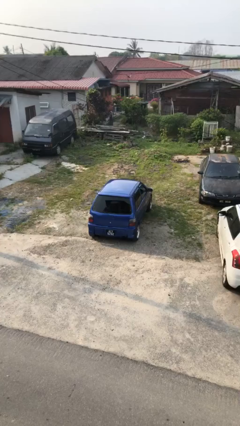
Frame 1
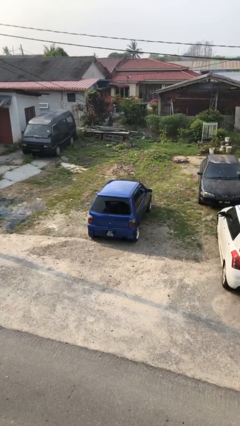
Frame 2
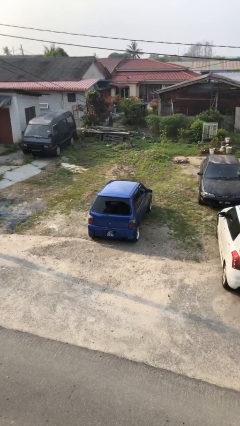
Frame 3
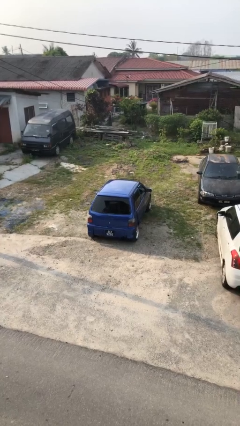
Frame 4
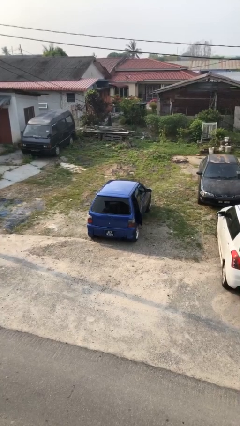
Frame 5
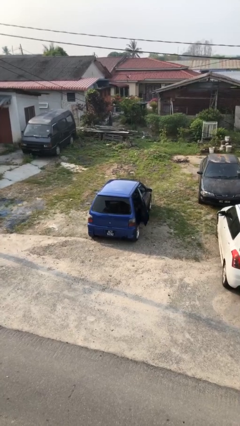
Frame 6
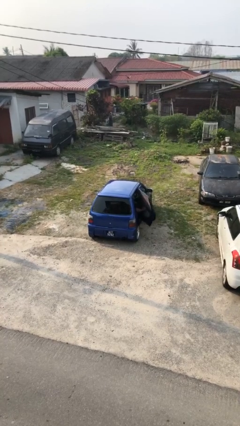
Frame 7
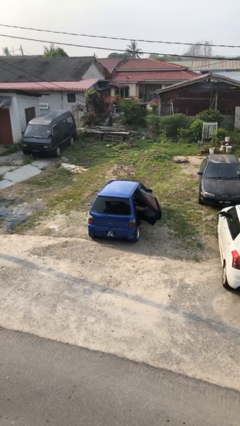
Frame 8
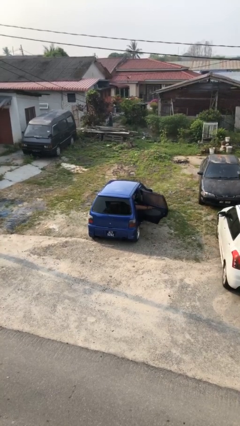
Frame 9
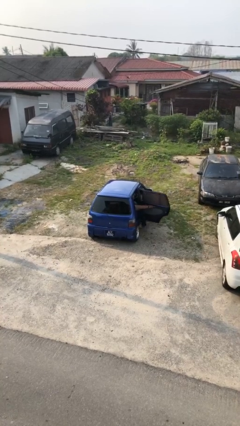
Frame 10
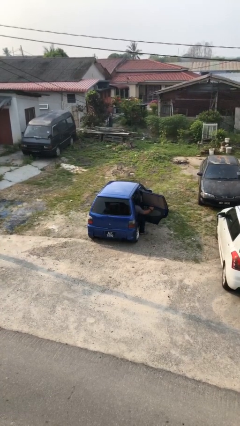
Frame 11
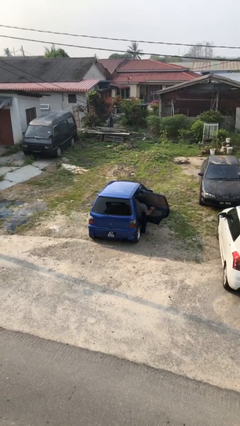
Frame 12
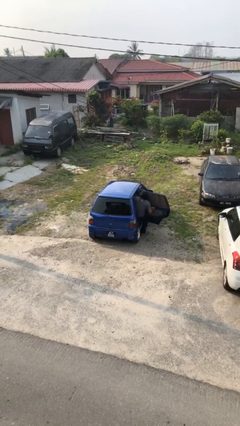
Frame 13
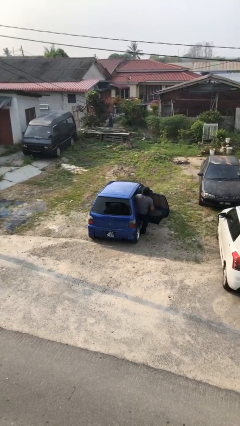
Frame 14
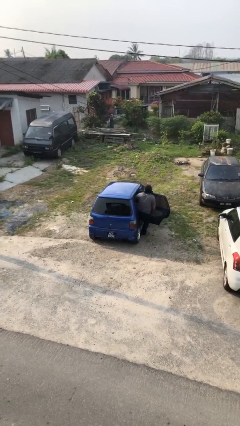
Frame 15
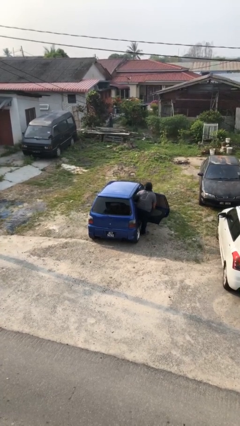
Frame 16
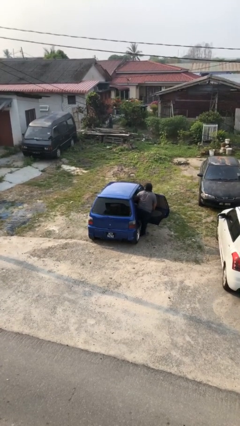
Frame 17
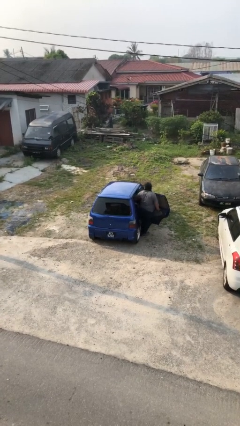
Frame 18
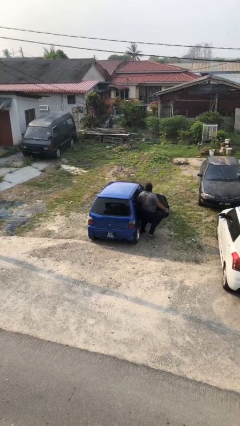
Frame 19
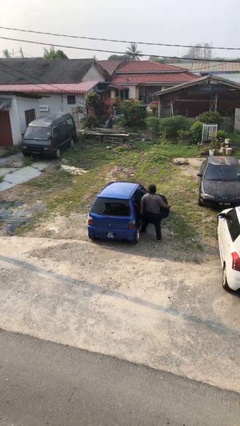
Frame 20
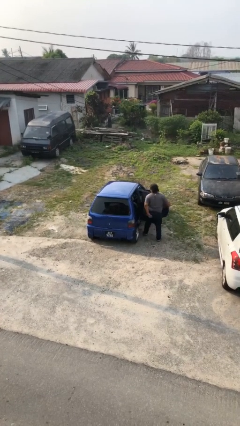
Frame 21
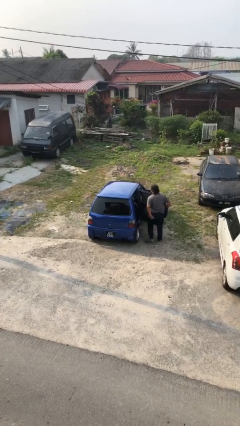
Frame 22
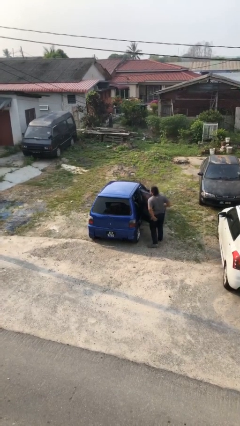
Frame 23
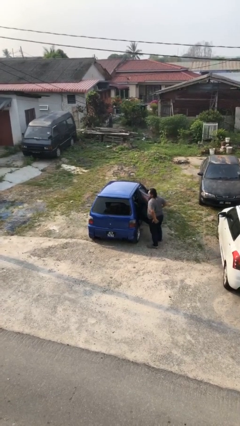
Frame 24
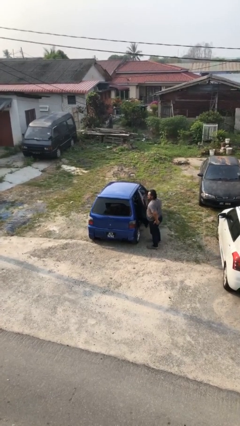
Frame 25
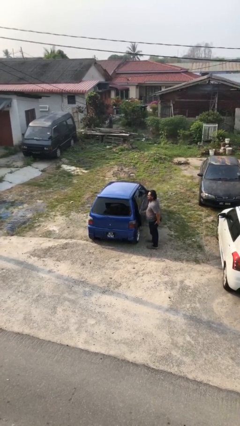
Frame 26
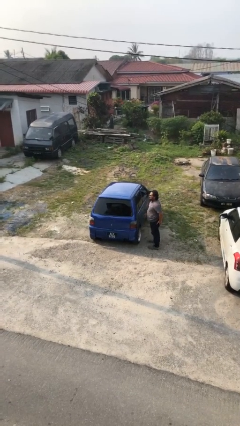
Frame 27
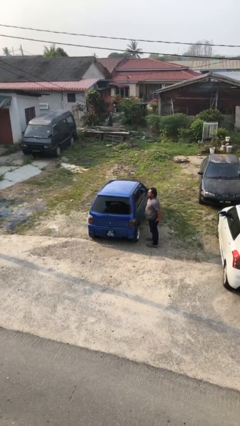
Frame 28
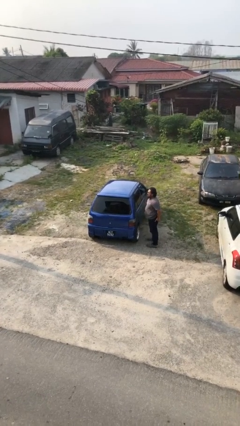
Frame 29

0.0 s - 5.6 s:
car drops off person

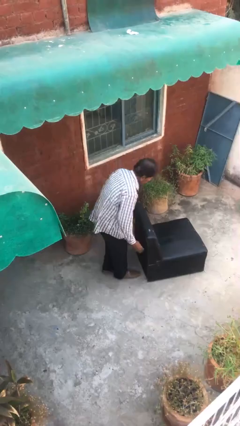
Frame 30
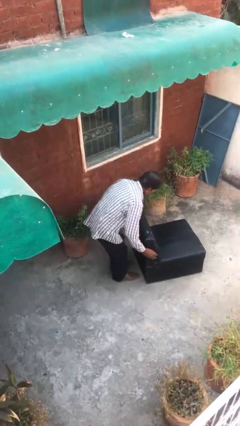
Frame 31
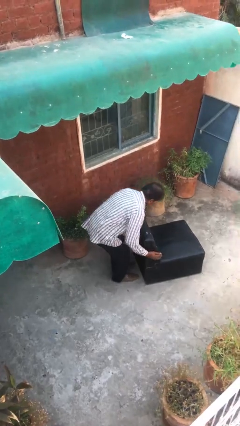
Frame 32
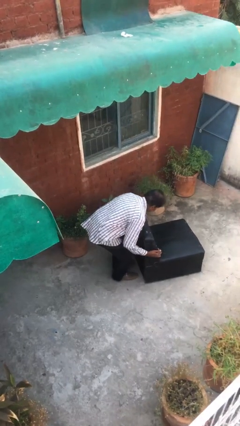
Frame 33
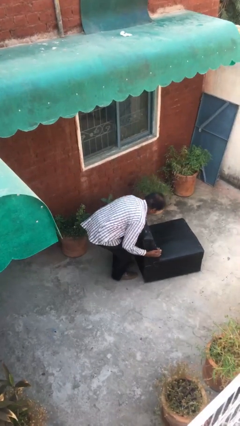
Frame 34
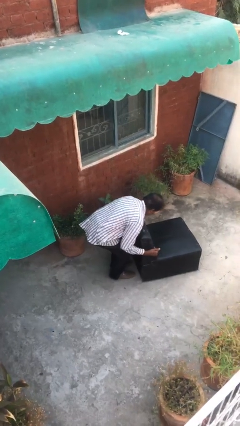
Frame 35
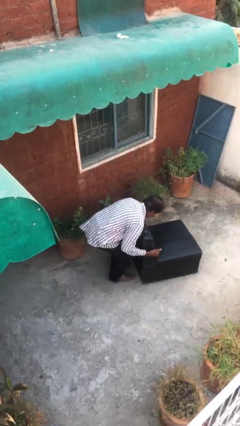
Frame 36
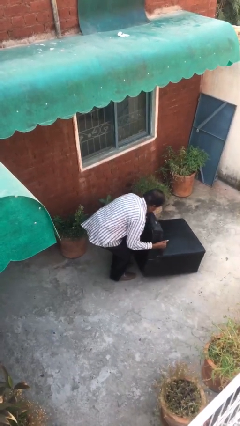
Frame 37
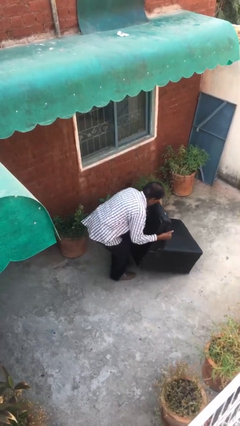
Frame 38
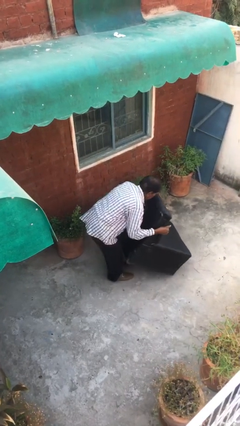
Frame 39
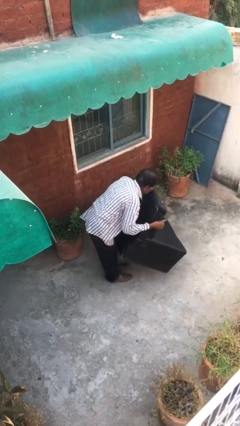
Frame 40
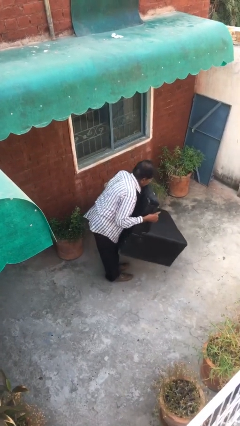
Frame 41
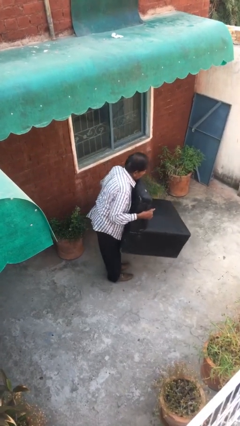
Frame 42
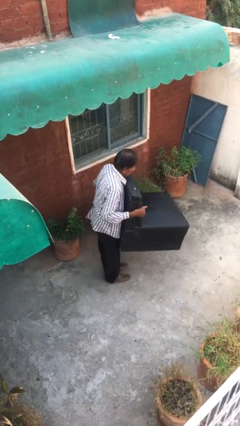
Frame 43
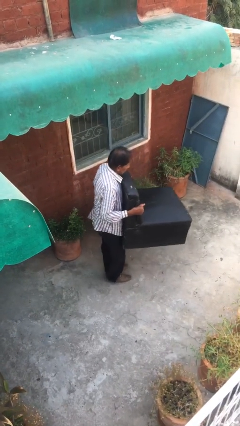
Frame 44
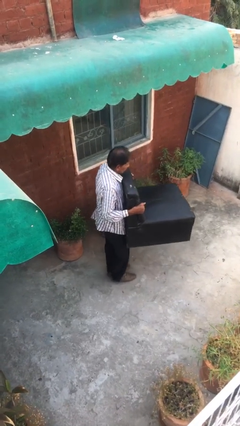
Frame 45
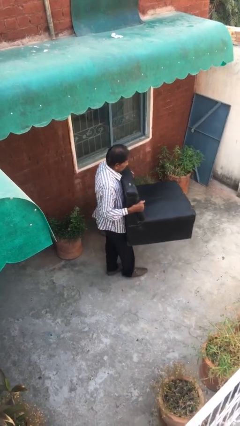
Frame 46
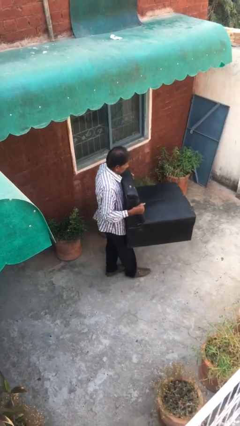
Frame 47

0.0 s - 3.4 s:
person picks up object from floor

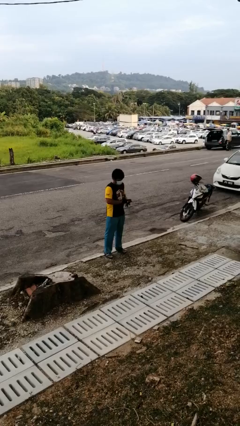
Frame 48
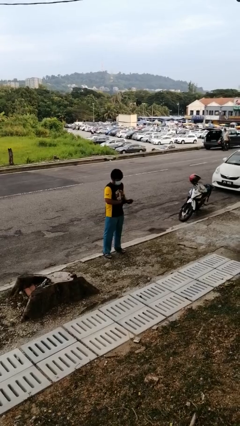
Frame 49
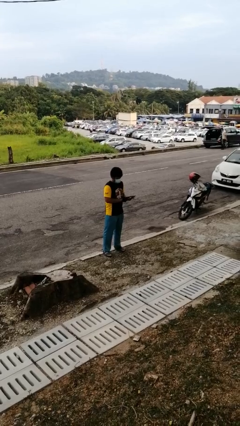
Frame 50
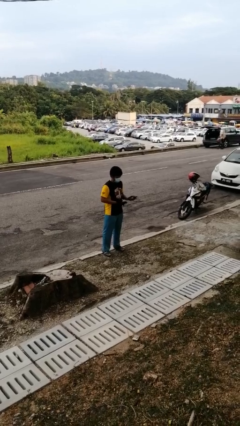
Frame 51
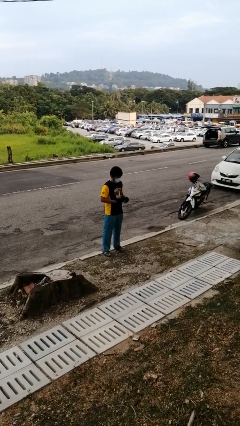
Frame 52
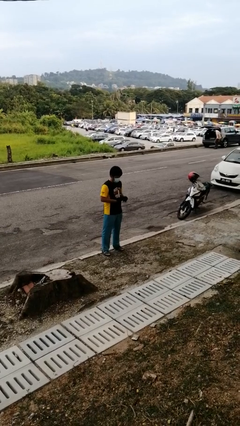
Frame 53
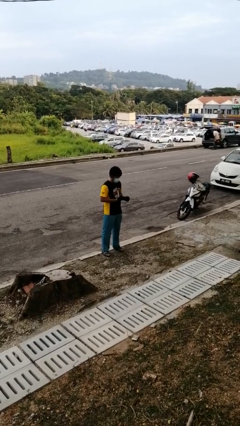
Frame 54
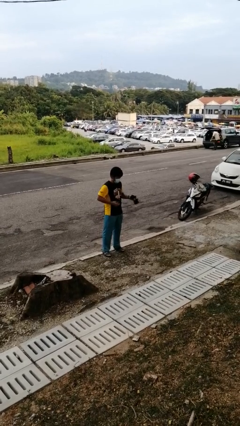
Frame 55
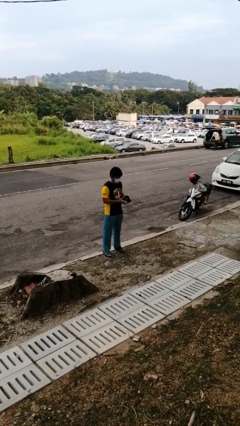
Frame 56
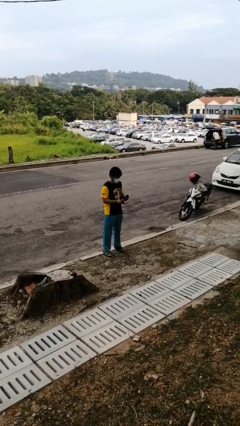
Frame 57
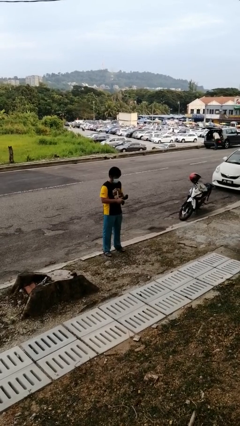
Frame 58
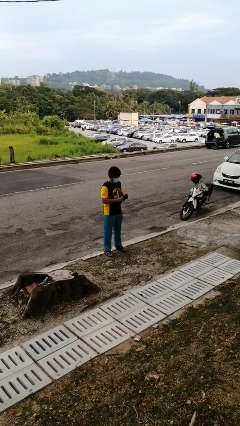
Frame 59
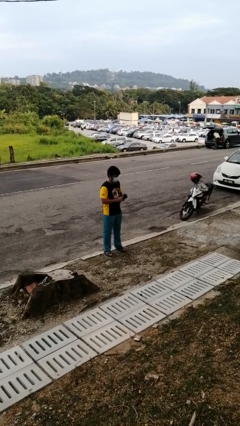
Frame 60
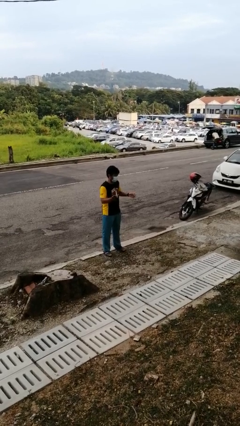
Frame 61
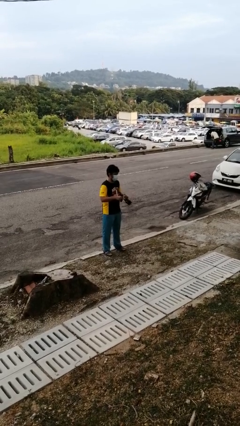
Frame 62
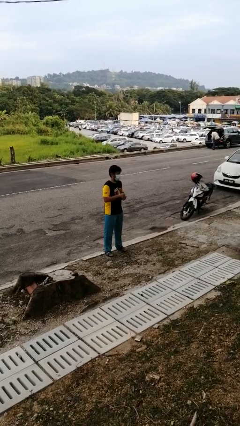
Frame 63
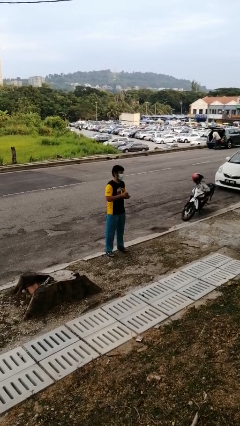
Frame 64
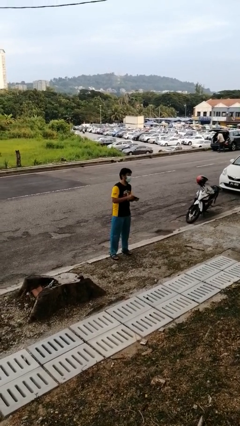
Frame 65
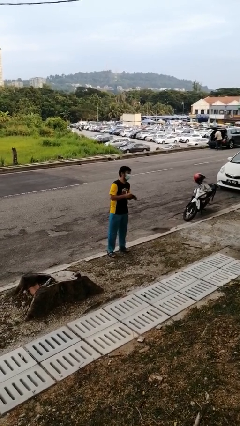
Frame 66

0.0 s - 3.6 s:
person takes off gloves

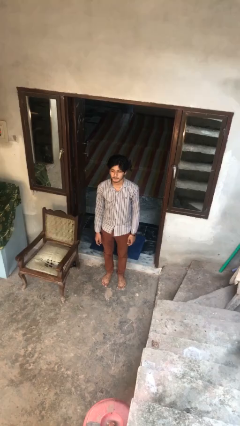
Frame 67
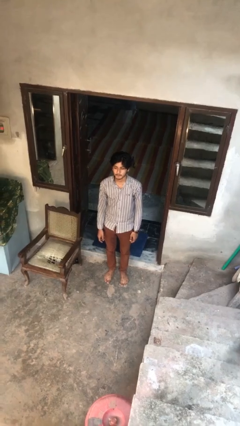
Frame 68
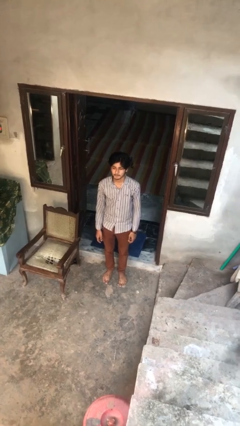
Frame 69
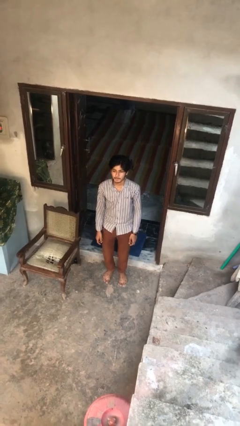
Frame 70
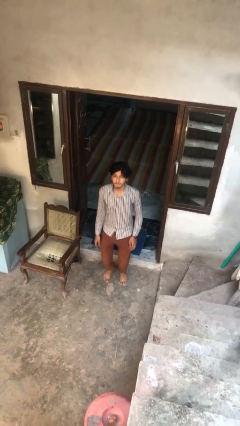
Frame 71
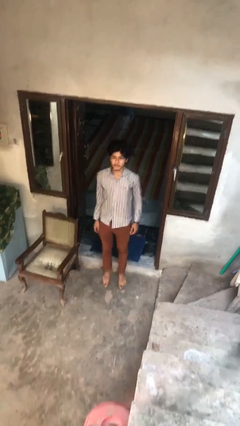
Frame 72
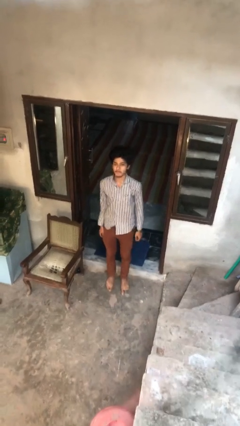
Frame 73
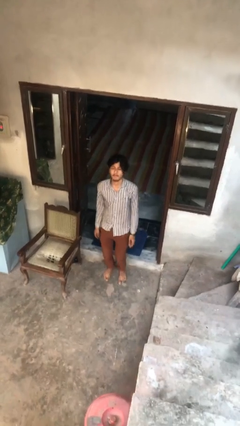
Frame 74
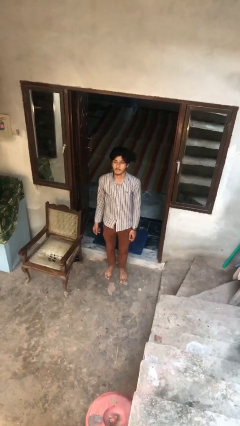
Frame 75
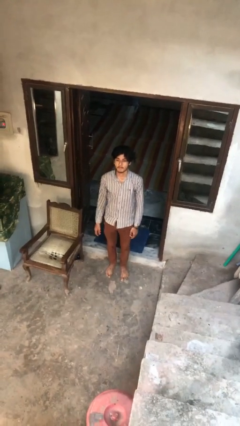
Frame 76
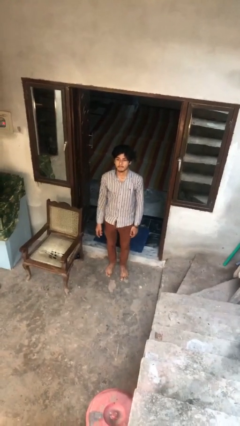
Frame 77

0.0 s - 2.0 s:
person jumps

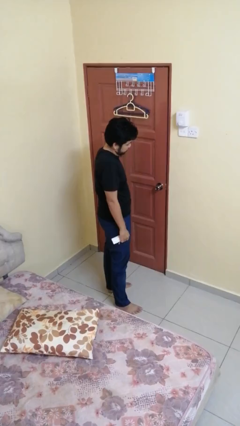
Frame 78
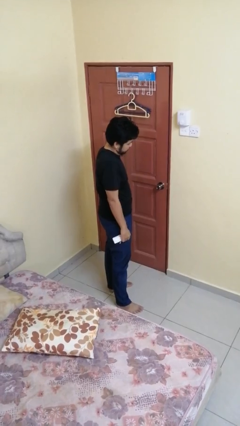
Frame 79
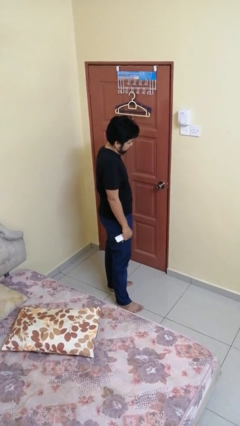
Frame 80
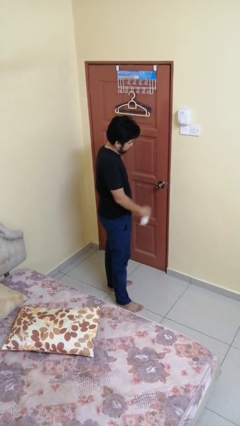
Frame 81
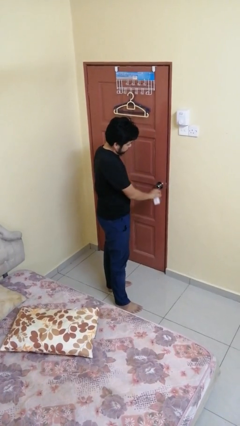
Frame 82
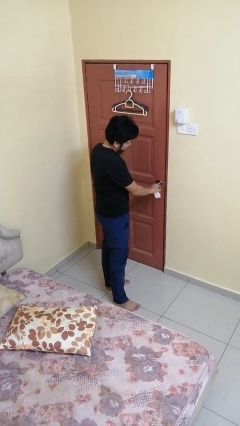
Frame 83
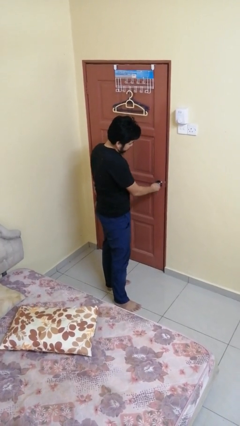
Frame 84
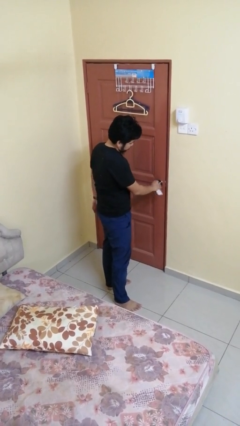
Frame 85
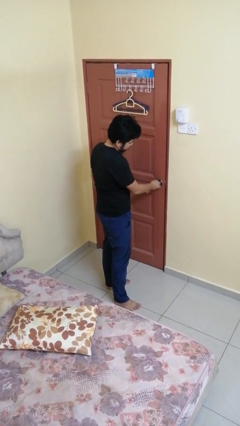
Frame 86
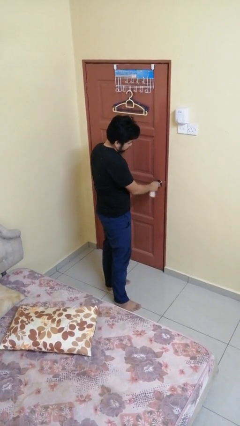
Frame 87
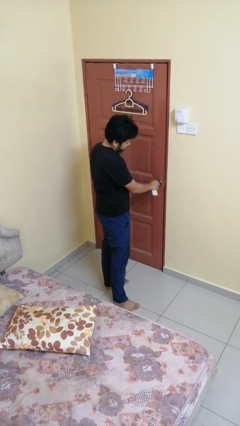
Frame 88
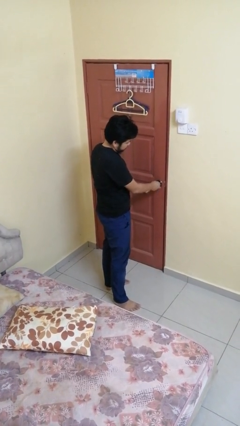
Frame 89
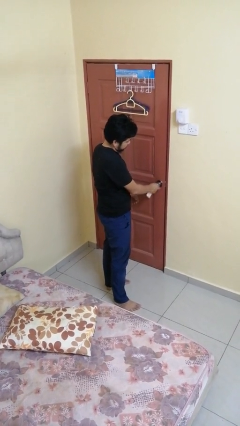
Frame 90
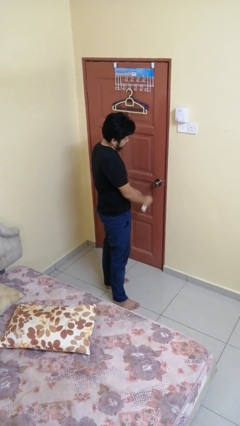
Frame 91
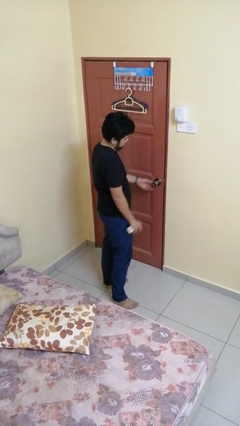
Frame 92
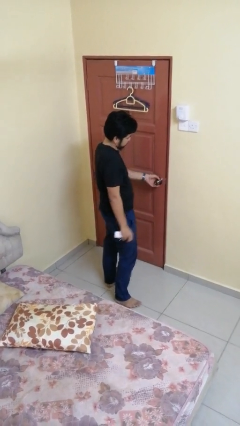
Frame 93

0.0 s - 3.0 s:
person unlocks door with keys
